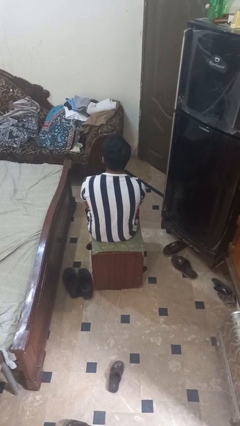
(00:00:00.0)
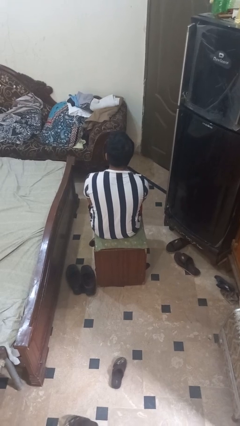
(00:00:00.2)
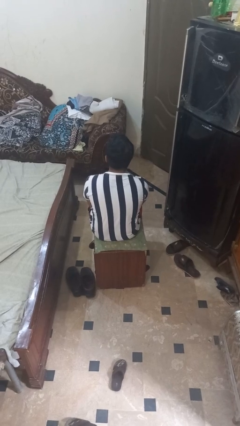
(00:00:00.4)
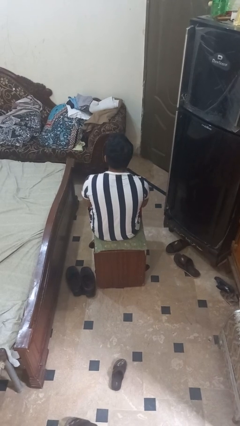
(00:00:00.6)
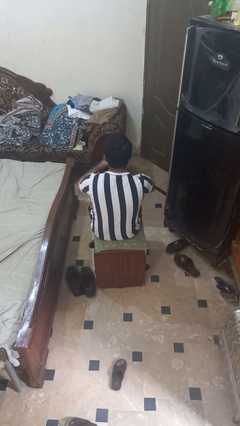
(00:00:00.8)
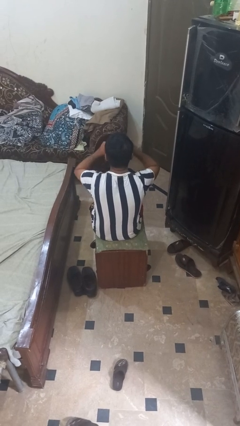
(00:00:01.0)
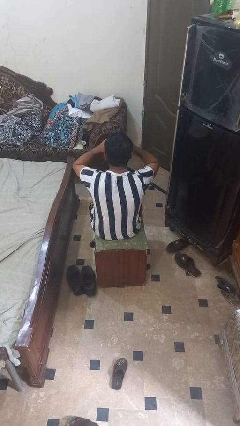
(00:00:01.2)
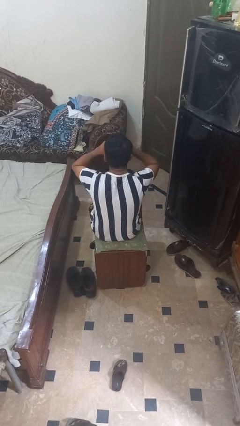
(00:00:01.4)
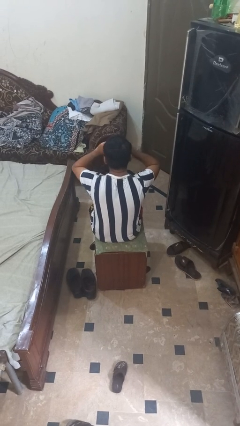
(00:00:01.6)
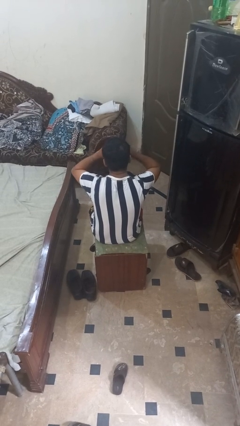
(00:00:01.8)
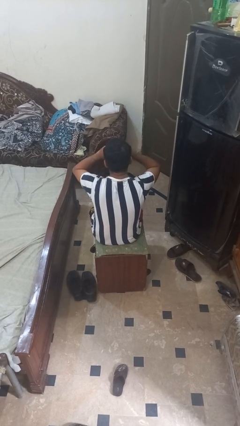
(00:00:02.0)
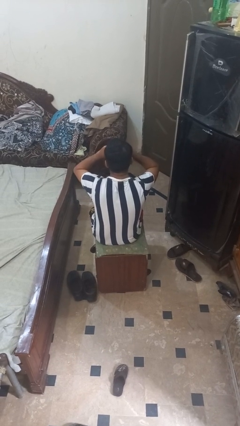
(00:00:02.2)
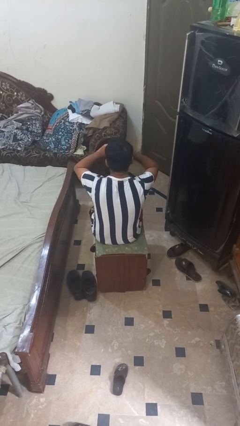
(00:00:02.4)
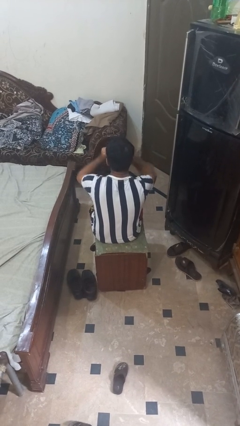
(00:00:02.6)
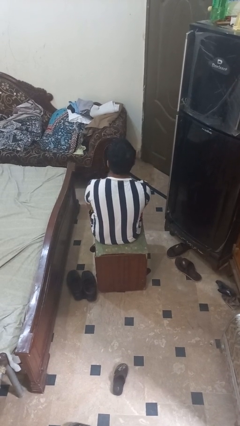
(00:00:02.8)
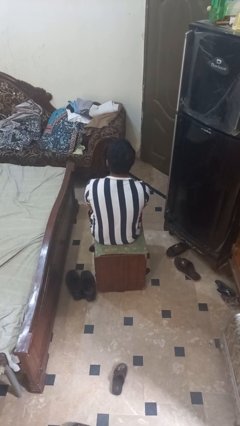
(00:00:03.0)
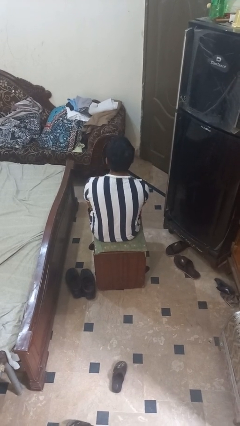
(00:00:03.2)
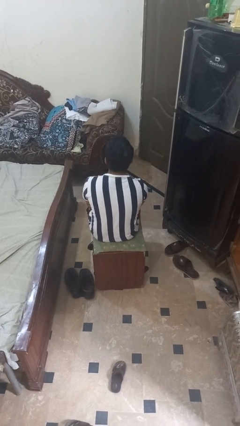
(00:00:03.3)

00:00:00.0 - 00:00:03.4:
person rubs eyes

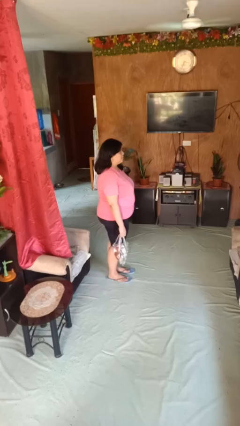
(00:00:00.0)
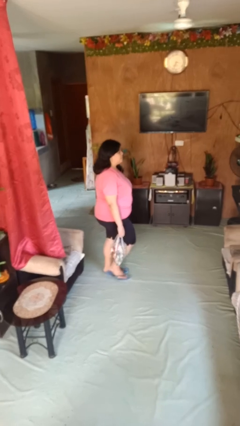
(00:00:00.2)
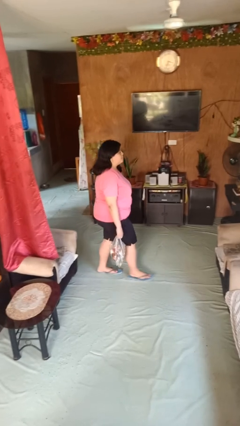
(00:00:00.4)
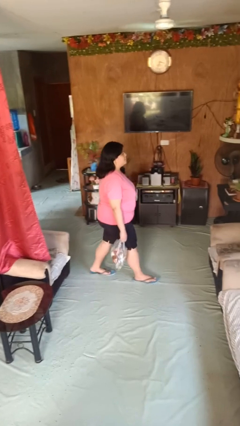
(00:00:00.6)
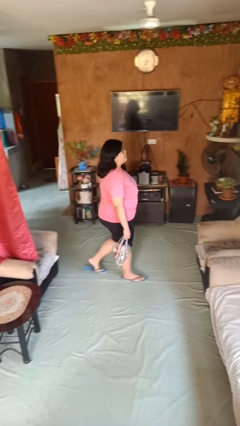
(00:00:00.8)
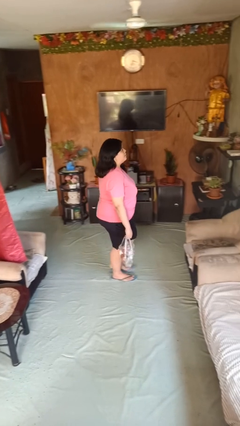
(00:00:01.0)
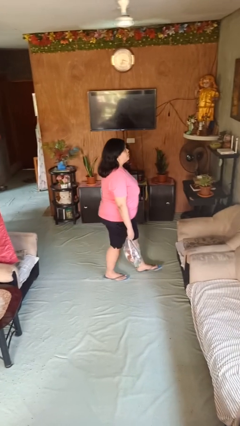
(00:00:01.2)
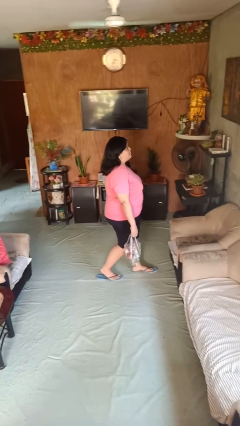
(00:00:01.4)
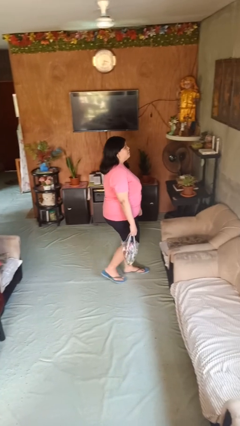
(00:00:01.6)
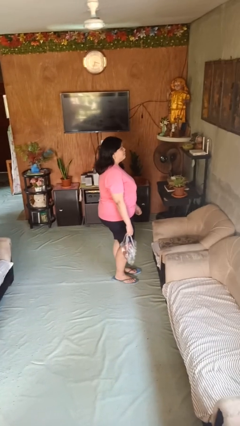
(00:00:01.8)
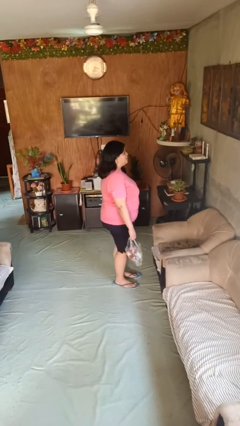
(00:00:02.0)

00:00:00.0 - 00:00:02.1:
person carries groceries

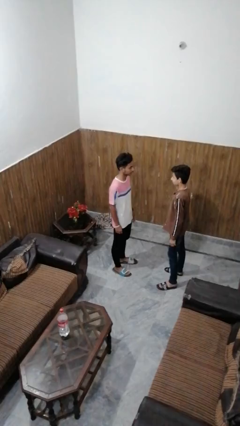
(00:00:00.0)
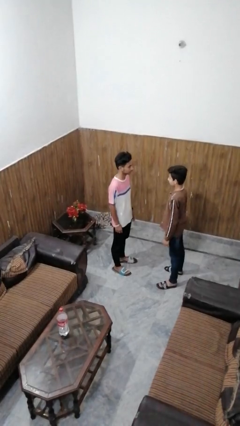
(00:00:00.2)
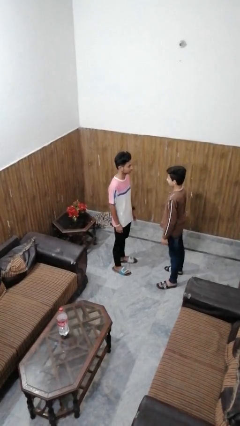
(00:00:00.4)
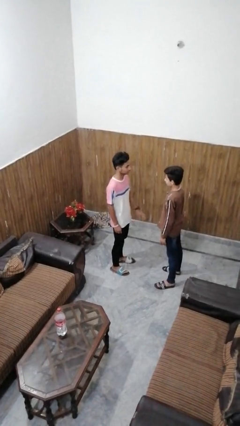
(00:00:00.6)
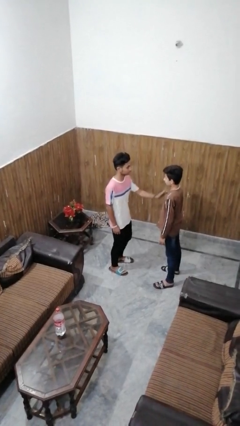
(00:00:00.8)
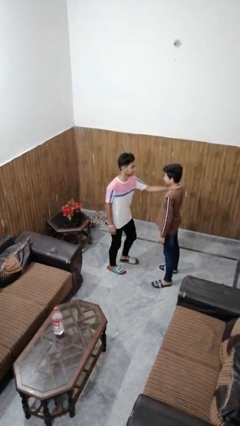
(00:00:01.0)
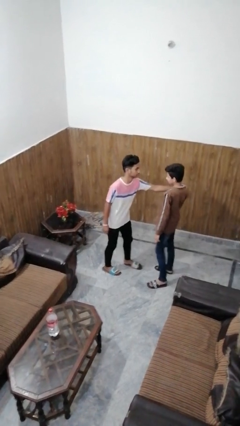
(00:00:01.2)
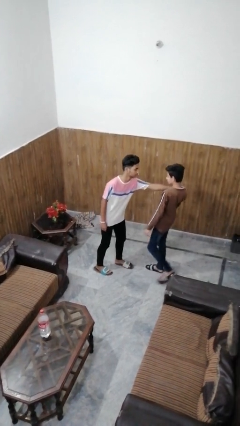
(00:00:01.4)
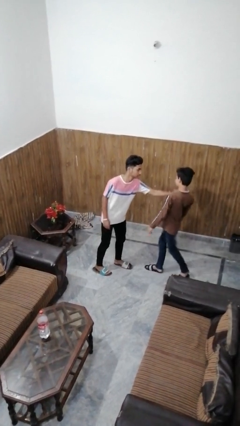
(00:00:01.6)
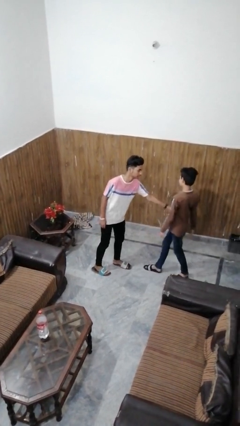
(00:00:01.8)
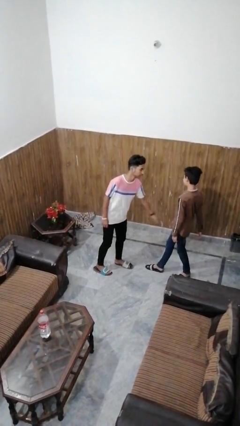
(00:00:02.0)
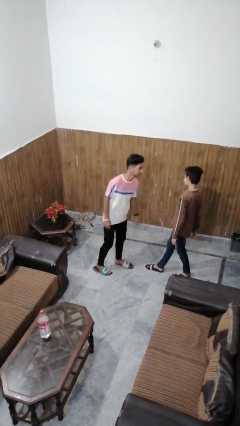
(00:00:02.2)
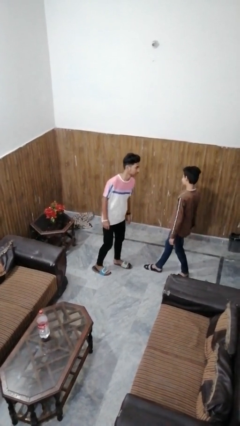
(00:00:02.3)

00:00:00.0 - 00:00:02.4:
person shoves person

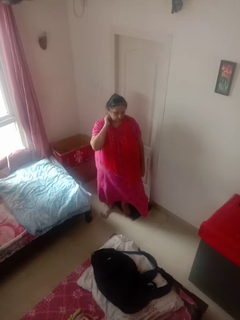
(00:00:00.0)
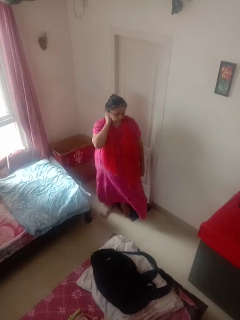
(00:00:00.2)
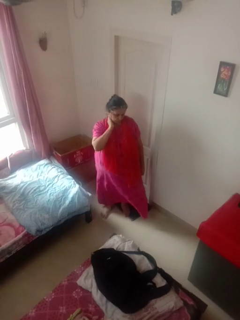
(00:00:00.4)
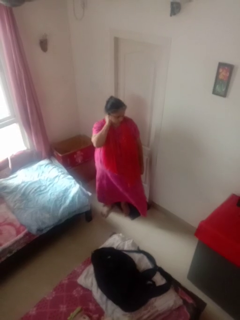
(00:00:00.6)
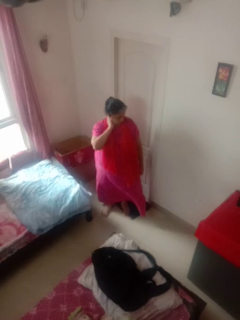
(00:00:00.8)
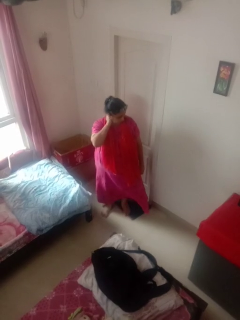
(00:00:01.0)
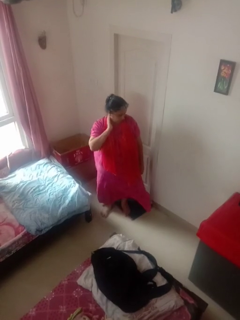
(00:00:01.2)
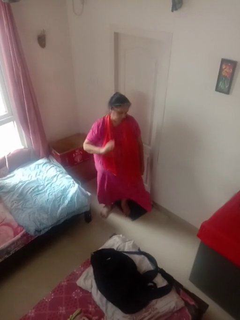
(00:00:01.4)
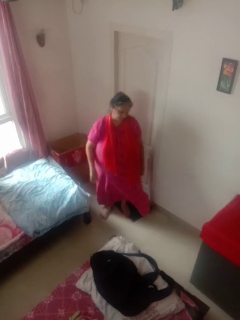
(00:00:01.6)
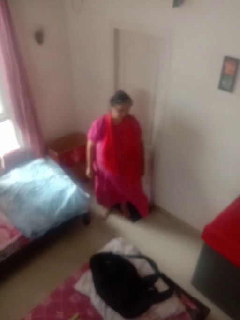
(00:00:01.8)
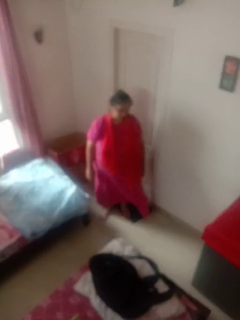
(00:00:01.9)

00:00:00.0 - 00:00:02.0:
person rubs neck

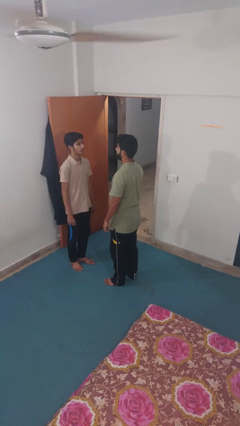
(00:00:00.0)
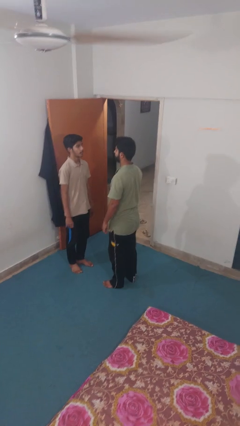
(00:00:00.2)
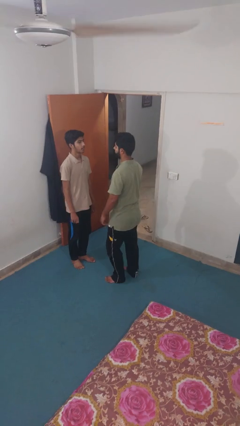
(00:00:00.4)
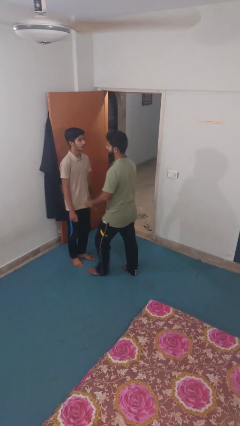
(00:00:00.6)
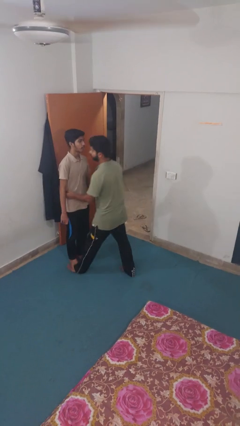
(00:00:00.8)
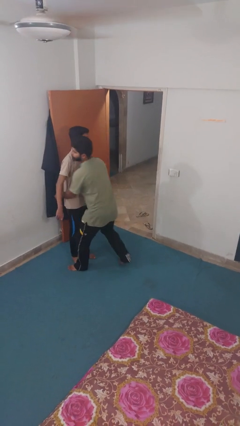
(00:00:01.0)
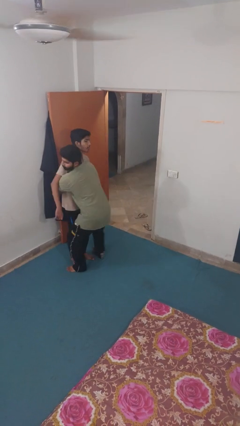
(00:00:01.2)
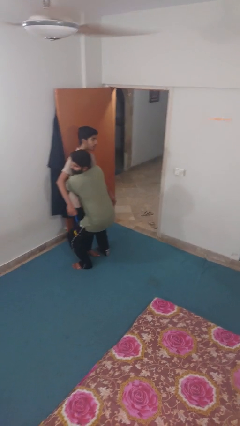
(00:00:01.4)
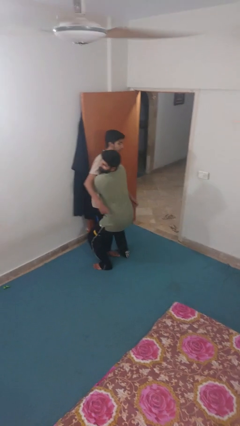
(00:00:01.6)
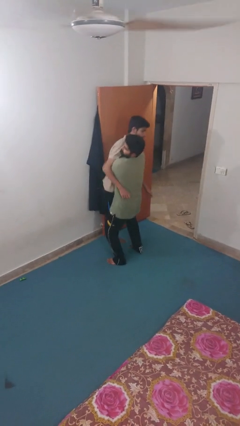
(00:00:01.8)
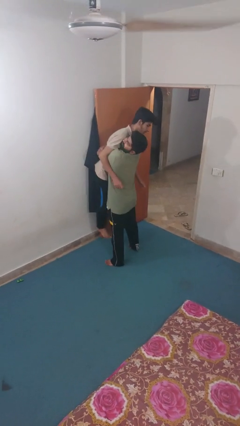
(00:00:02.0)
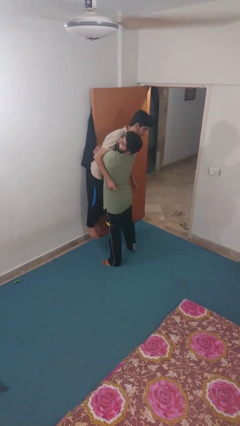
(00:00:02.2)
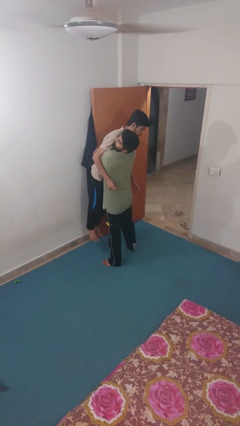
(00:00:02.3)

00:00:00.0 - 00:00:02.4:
person picks up person

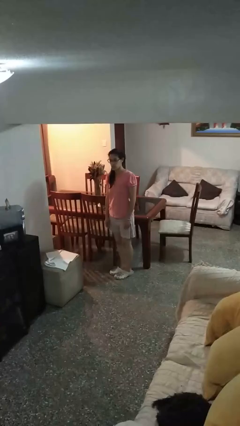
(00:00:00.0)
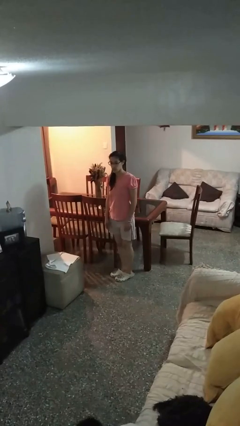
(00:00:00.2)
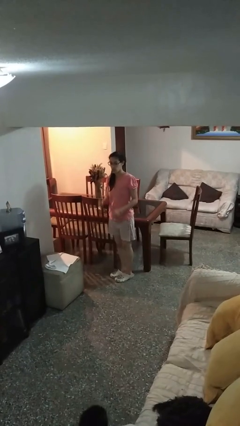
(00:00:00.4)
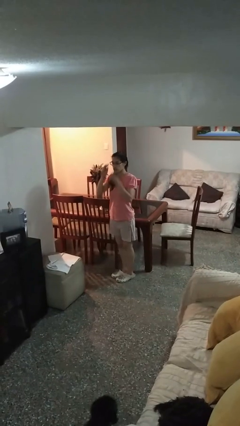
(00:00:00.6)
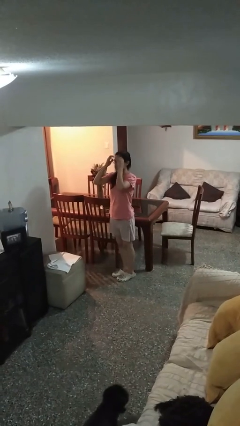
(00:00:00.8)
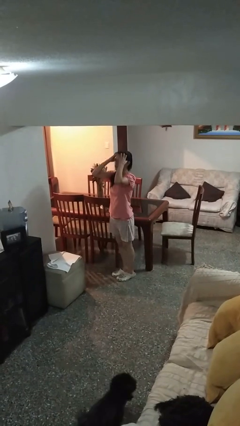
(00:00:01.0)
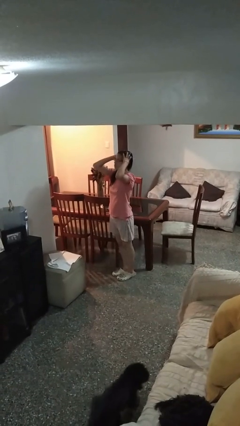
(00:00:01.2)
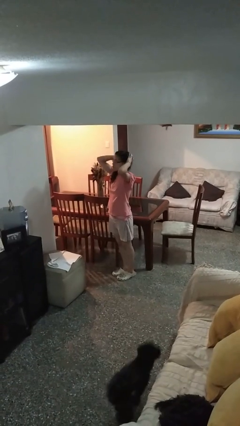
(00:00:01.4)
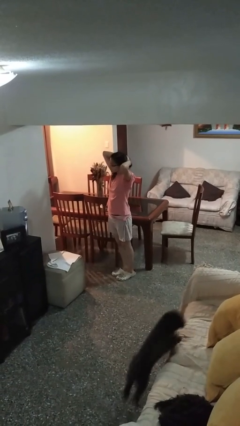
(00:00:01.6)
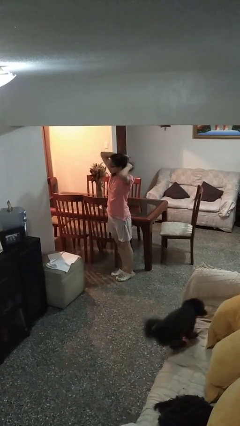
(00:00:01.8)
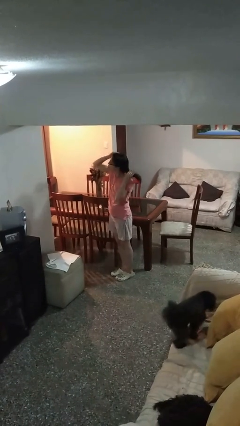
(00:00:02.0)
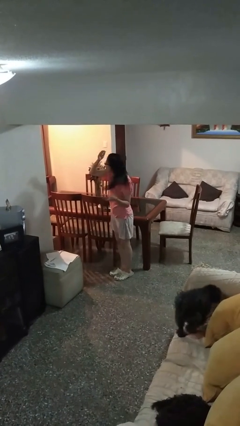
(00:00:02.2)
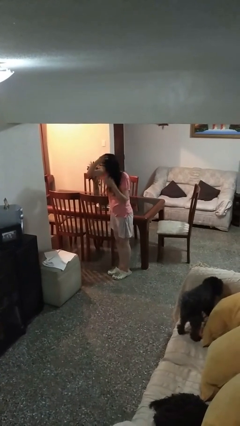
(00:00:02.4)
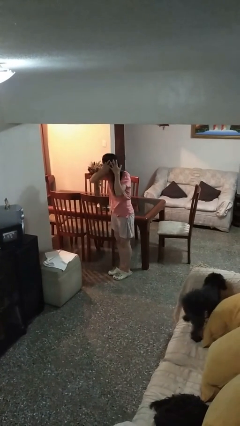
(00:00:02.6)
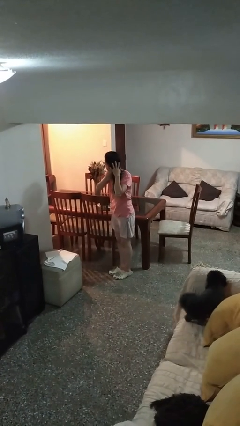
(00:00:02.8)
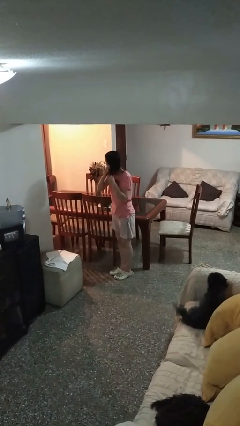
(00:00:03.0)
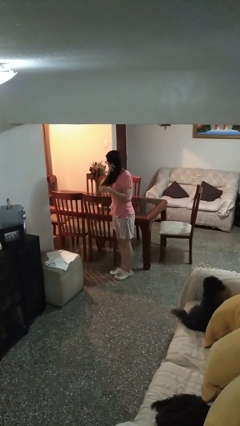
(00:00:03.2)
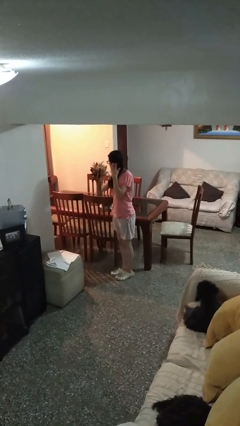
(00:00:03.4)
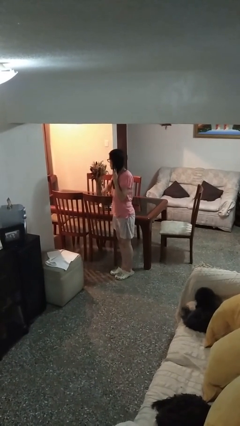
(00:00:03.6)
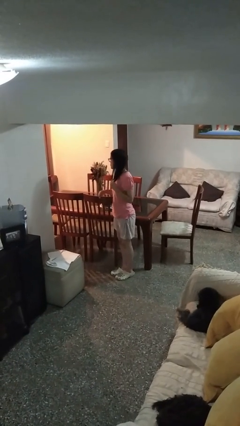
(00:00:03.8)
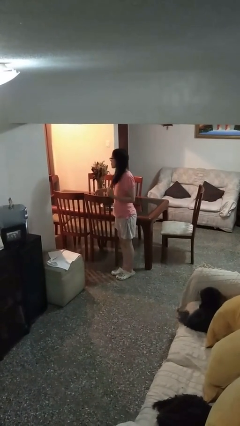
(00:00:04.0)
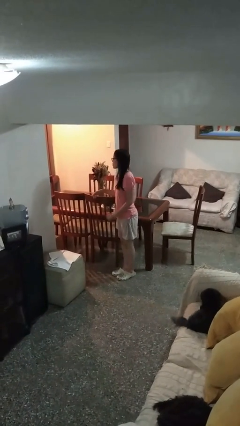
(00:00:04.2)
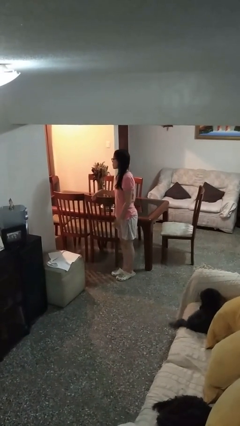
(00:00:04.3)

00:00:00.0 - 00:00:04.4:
person strokes hair

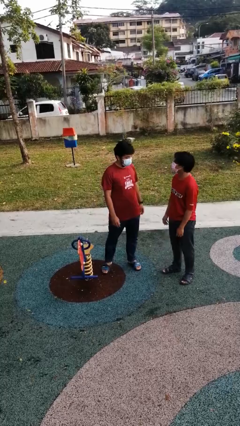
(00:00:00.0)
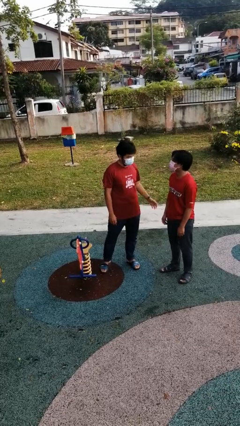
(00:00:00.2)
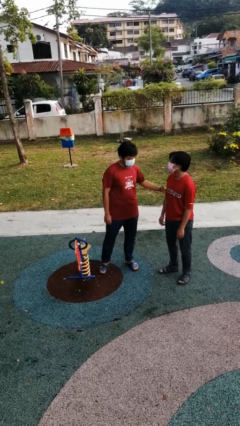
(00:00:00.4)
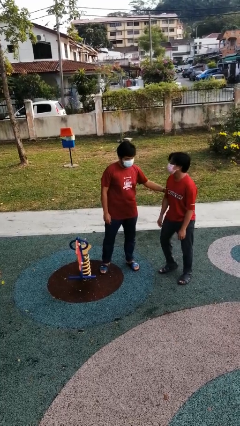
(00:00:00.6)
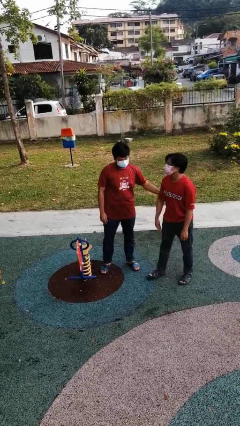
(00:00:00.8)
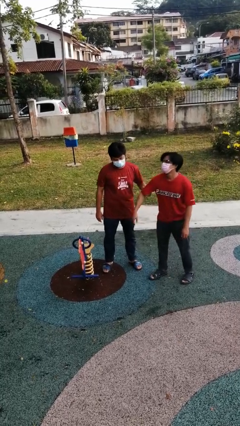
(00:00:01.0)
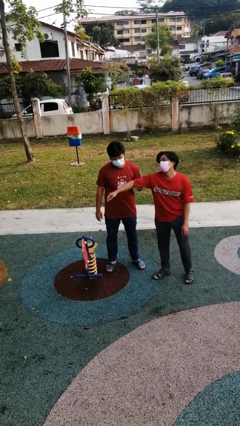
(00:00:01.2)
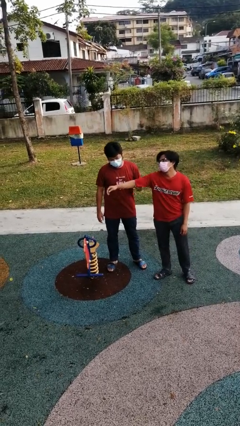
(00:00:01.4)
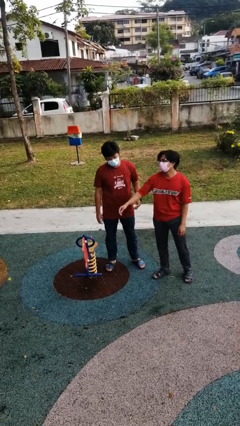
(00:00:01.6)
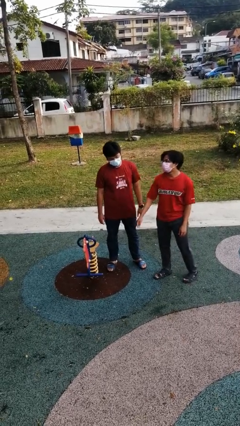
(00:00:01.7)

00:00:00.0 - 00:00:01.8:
person grabs person by bicep
